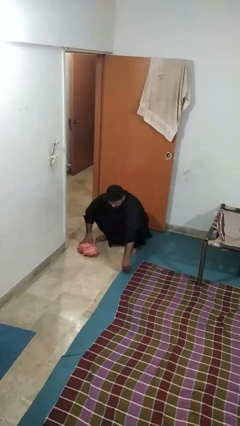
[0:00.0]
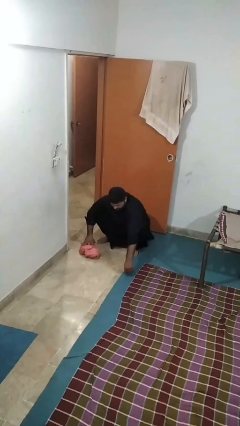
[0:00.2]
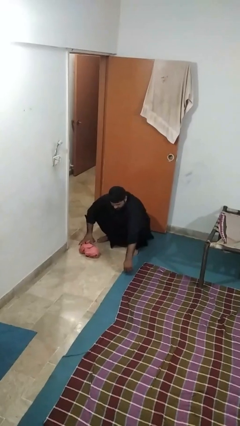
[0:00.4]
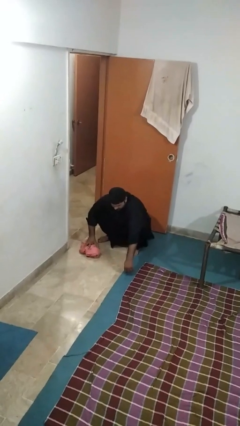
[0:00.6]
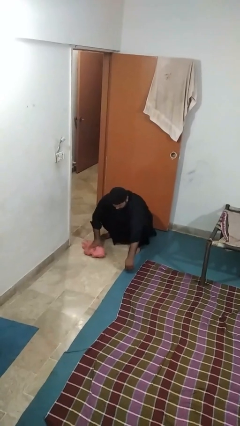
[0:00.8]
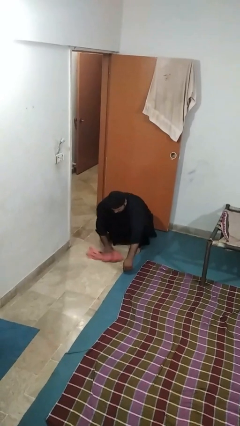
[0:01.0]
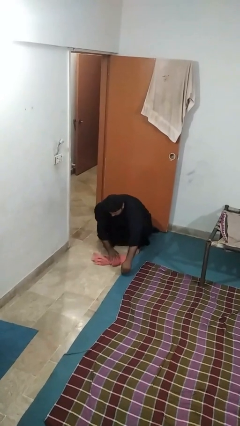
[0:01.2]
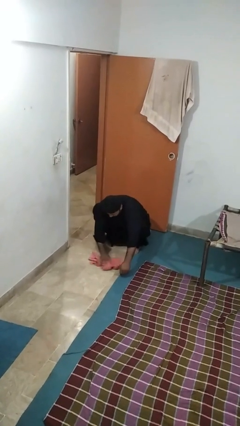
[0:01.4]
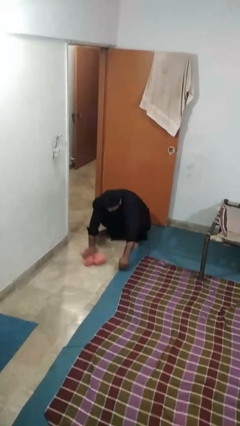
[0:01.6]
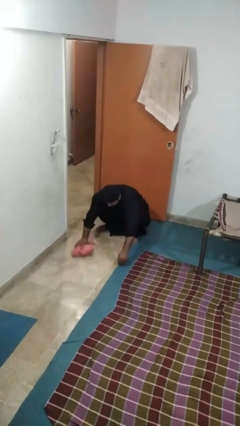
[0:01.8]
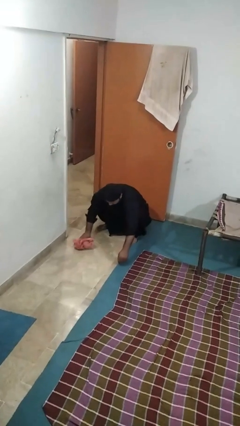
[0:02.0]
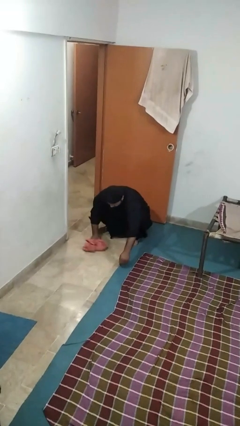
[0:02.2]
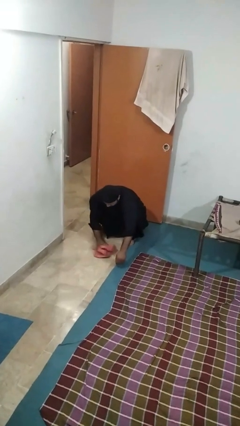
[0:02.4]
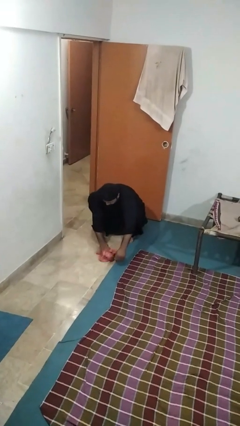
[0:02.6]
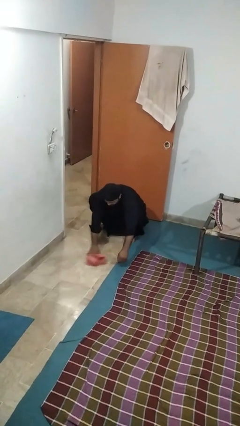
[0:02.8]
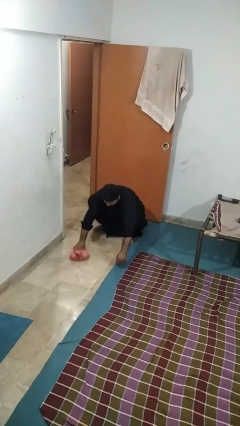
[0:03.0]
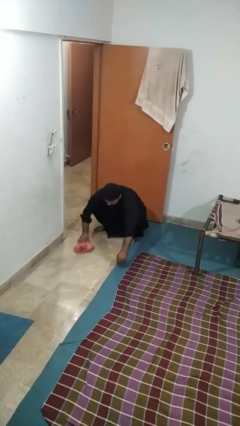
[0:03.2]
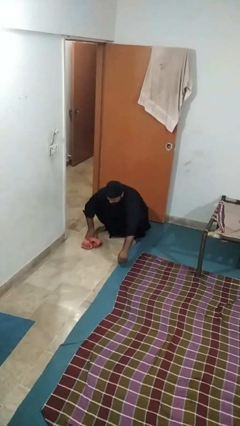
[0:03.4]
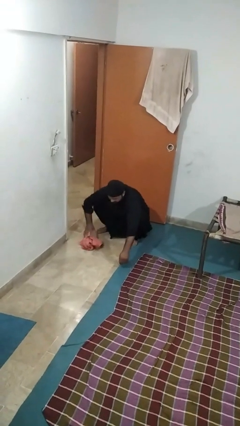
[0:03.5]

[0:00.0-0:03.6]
person mops

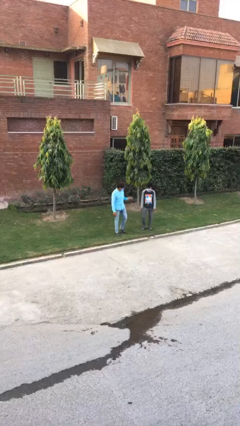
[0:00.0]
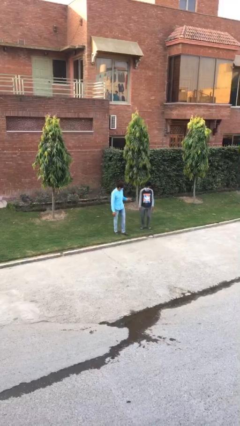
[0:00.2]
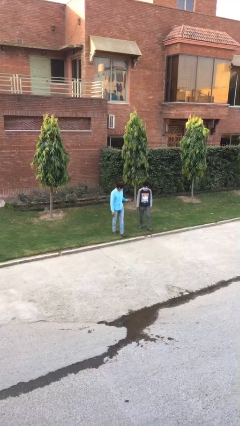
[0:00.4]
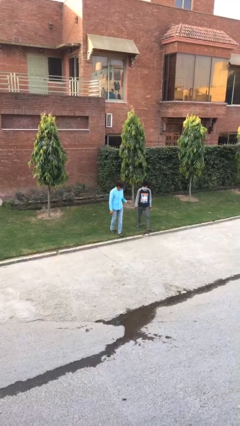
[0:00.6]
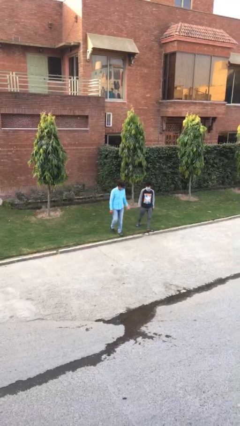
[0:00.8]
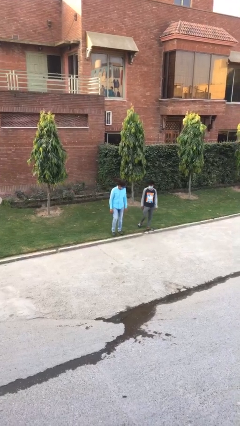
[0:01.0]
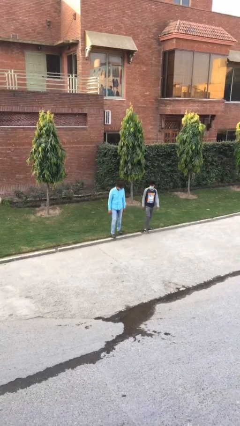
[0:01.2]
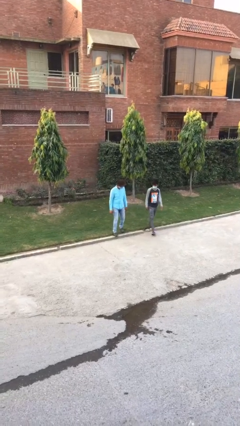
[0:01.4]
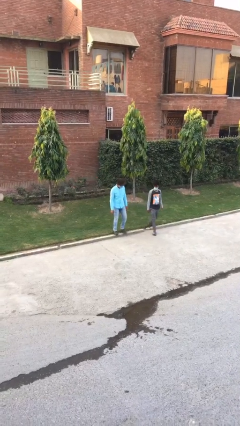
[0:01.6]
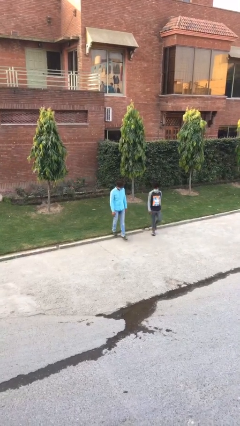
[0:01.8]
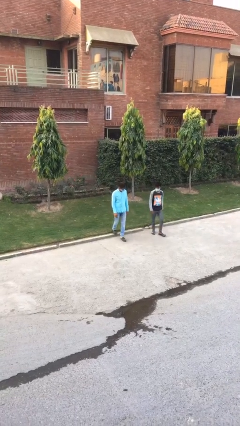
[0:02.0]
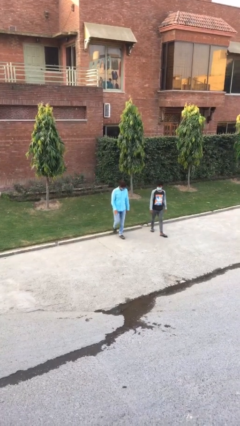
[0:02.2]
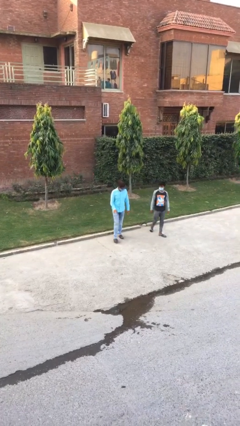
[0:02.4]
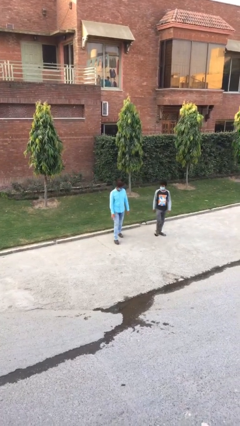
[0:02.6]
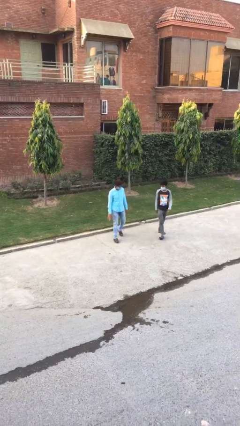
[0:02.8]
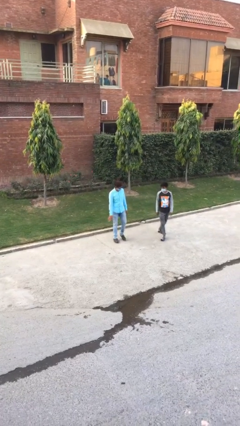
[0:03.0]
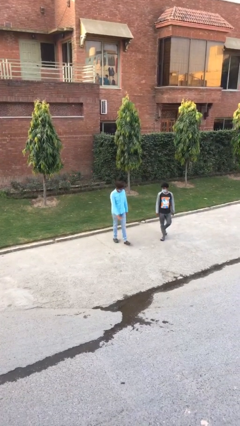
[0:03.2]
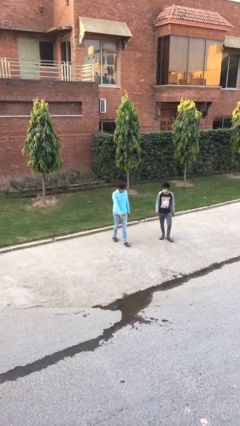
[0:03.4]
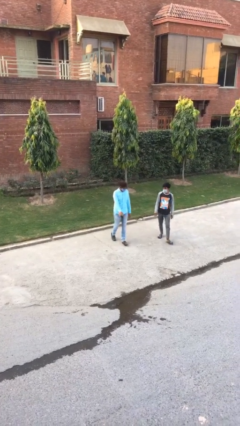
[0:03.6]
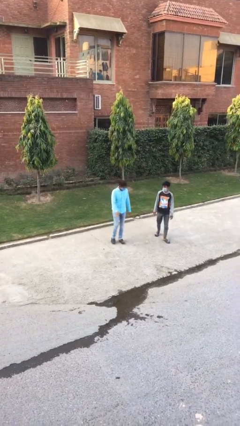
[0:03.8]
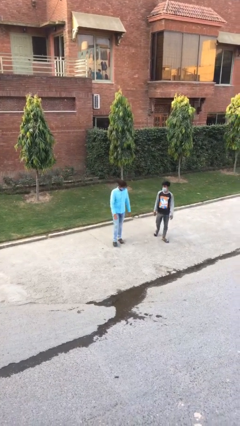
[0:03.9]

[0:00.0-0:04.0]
person talks to person

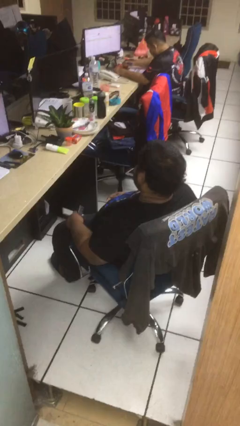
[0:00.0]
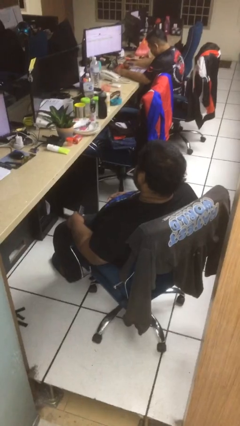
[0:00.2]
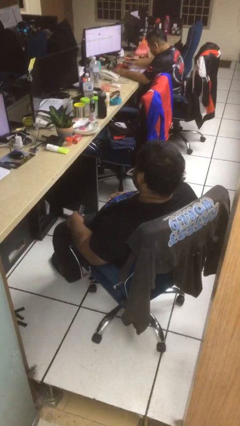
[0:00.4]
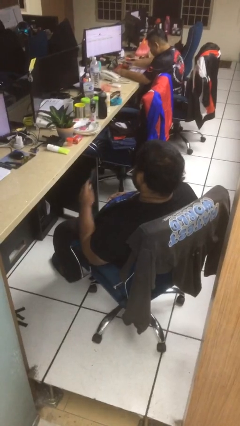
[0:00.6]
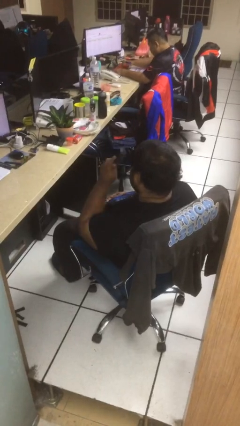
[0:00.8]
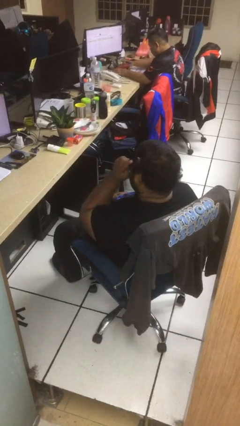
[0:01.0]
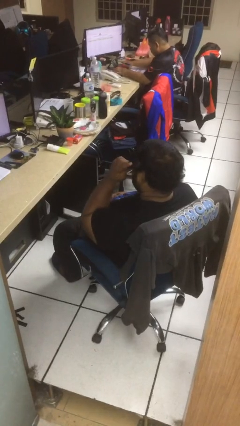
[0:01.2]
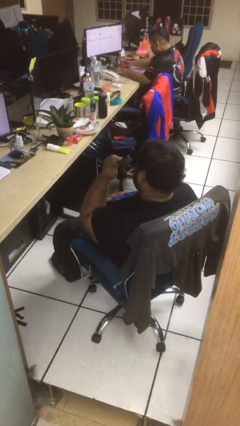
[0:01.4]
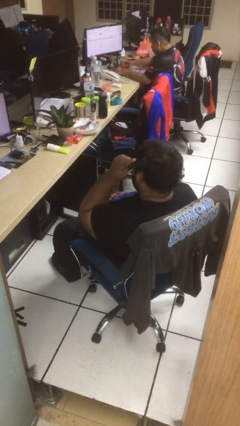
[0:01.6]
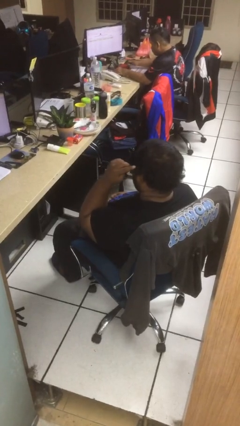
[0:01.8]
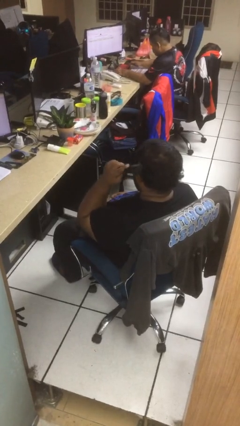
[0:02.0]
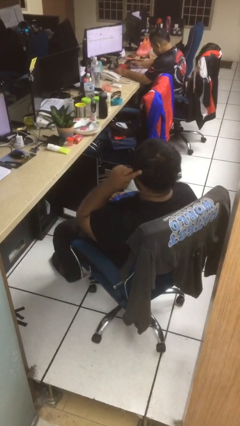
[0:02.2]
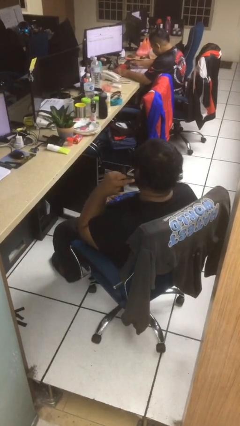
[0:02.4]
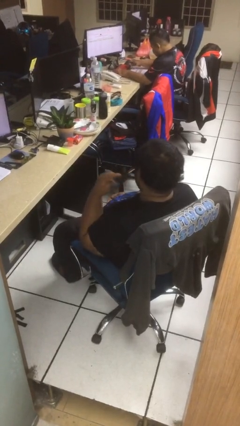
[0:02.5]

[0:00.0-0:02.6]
person brushes hair

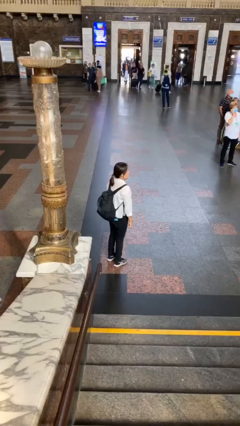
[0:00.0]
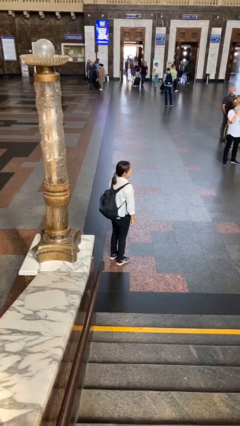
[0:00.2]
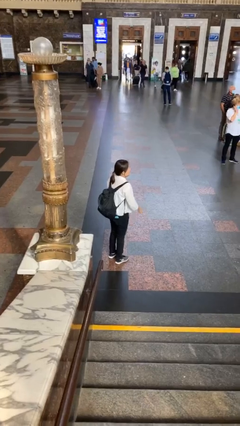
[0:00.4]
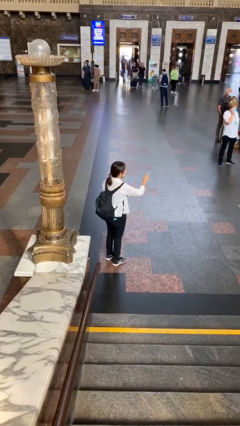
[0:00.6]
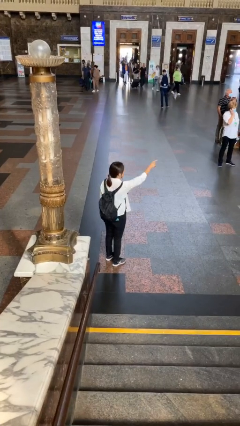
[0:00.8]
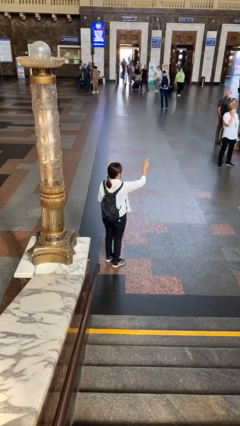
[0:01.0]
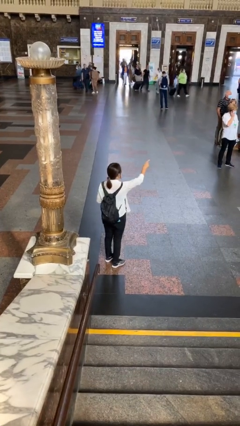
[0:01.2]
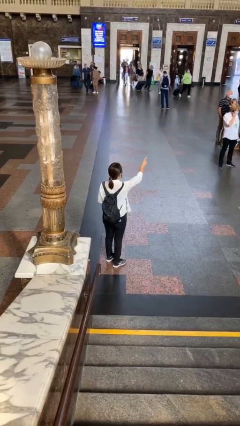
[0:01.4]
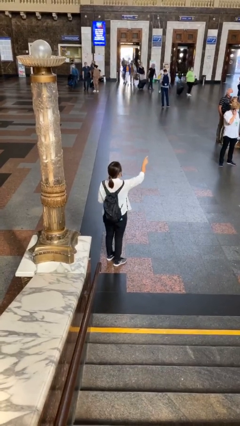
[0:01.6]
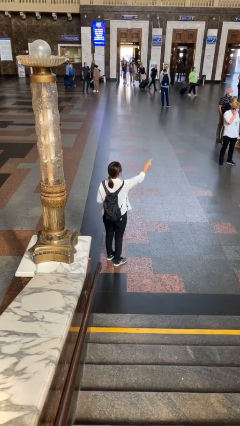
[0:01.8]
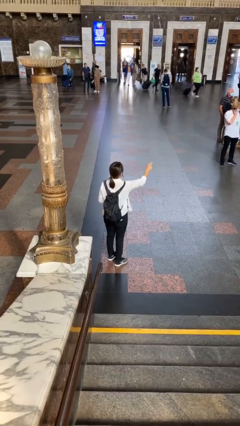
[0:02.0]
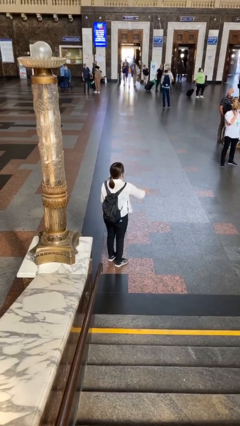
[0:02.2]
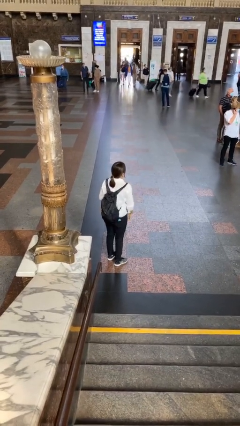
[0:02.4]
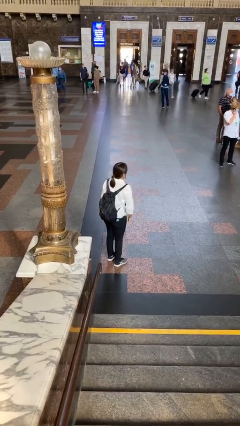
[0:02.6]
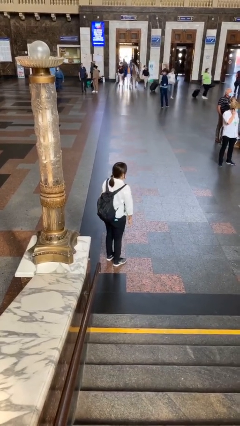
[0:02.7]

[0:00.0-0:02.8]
person points at person

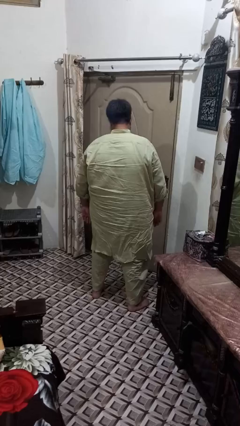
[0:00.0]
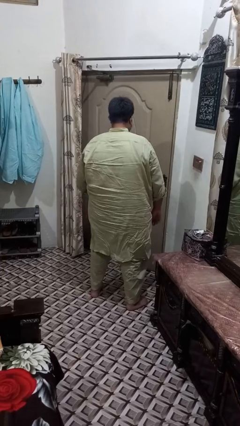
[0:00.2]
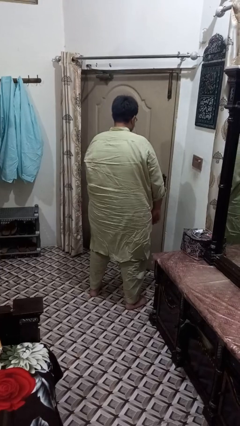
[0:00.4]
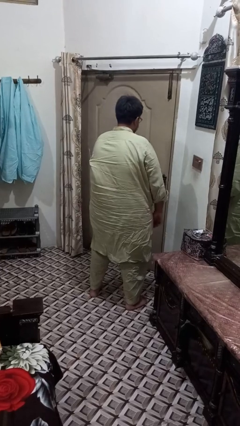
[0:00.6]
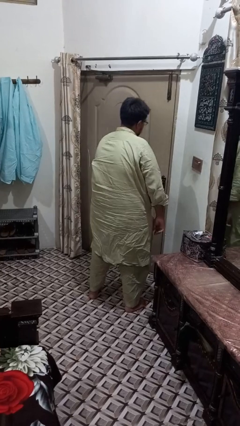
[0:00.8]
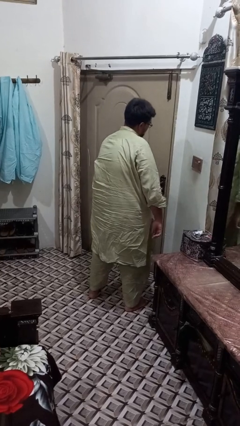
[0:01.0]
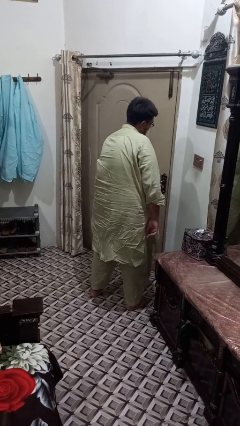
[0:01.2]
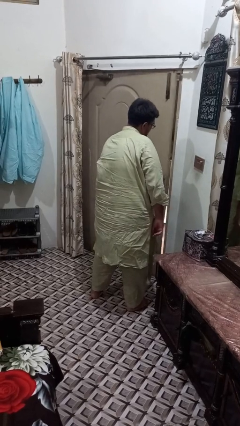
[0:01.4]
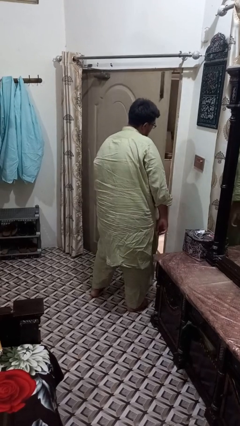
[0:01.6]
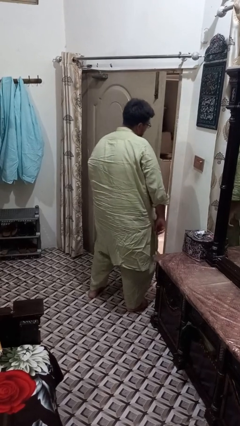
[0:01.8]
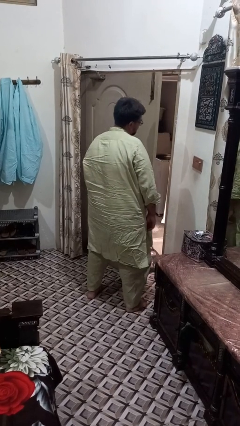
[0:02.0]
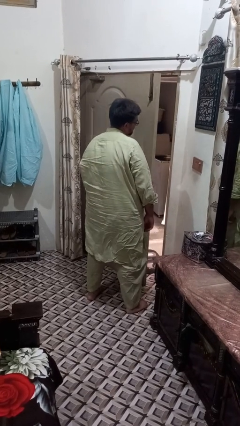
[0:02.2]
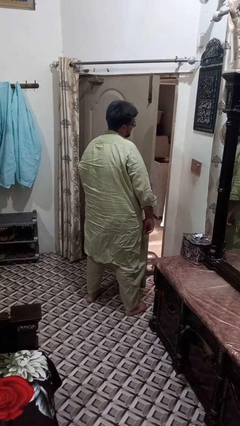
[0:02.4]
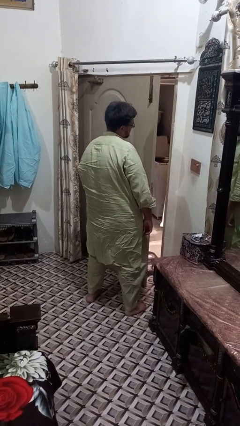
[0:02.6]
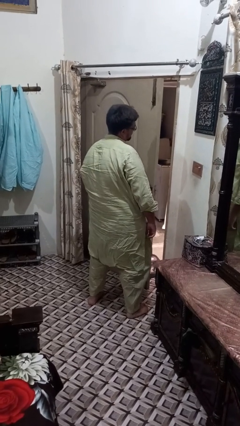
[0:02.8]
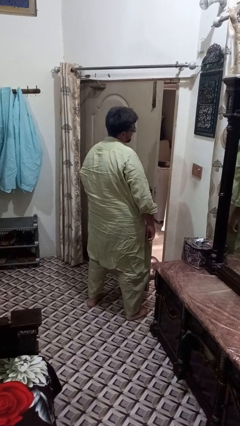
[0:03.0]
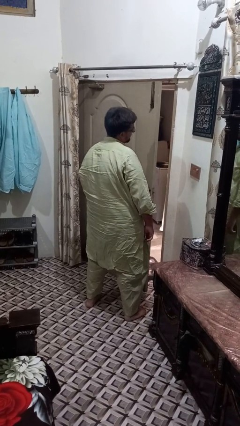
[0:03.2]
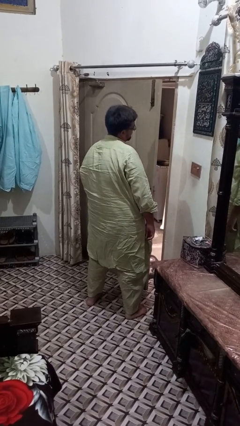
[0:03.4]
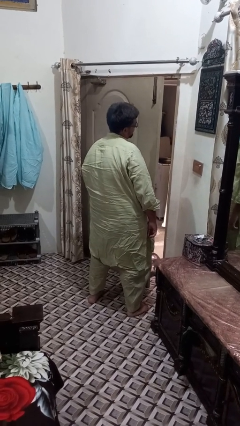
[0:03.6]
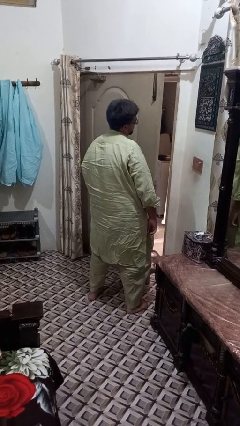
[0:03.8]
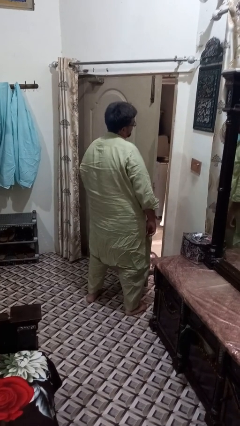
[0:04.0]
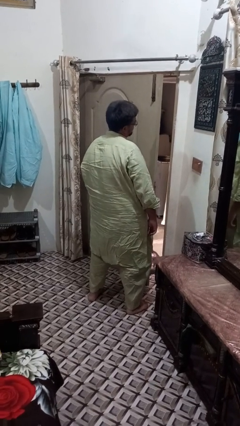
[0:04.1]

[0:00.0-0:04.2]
person opens gate
